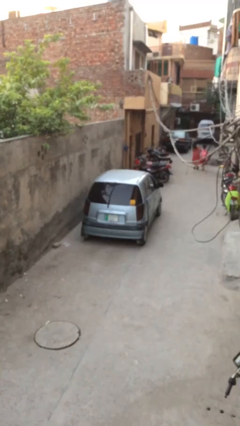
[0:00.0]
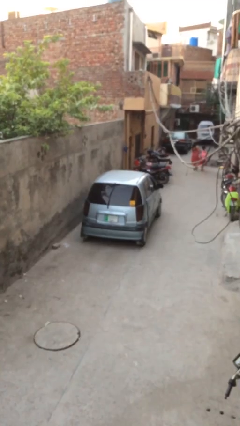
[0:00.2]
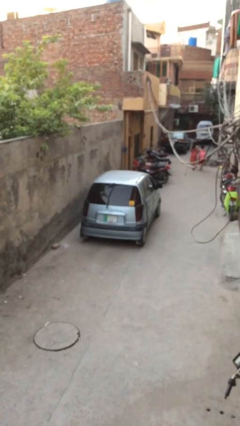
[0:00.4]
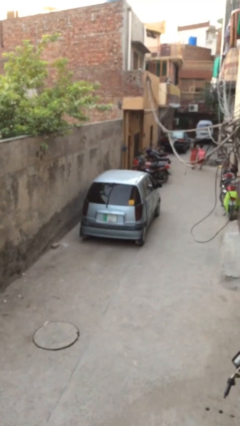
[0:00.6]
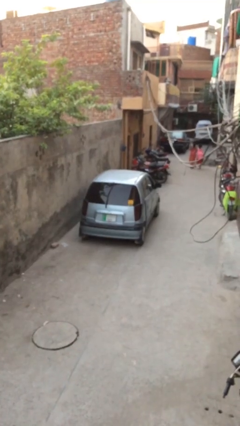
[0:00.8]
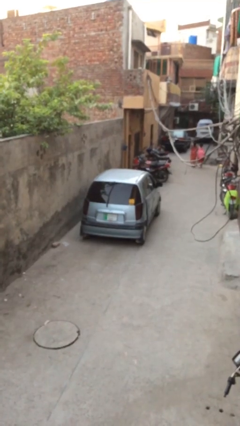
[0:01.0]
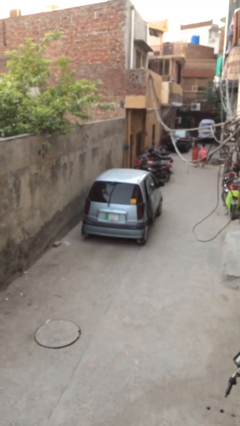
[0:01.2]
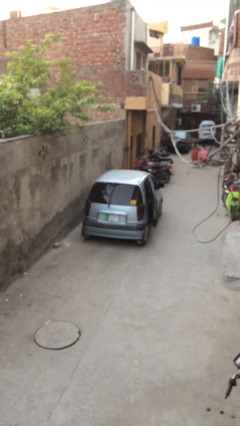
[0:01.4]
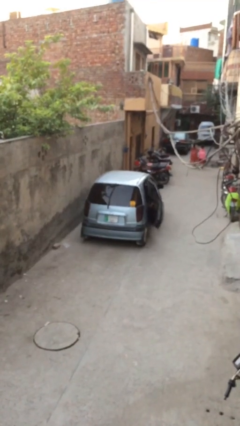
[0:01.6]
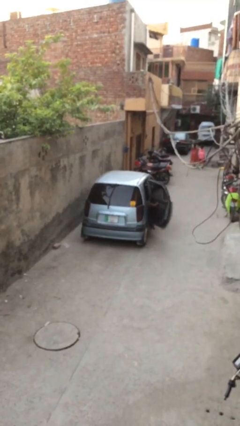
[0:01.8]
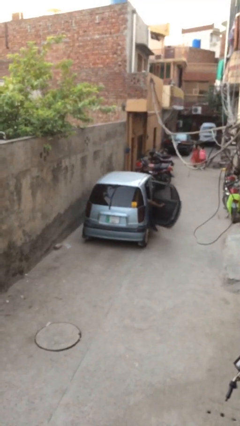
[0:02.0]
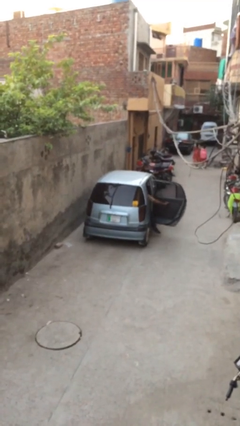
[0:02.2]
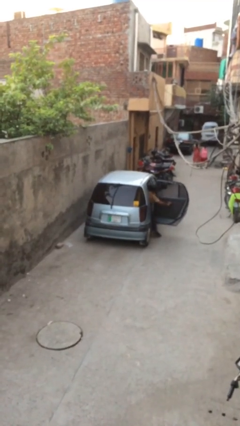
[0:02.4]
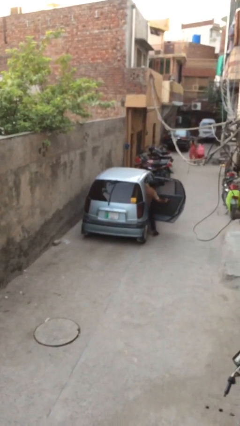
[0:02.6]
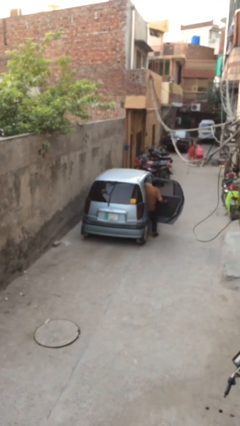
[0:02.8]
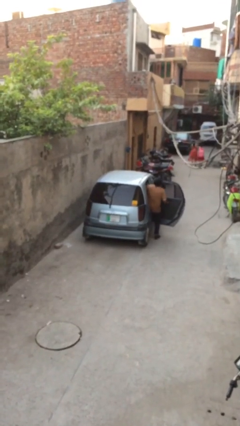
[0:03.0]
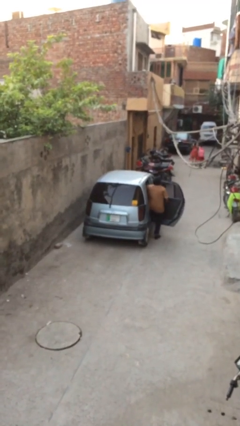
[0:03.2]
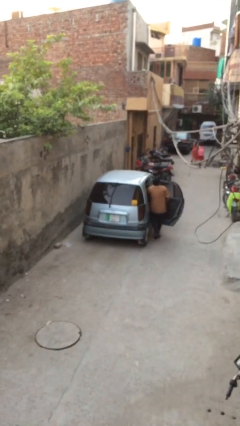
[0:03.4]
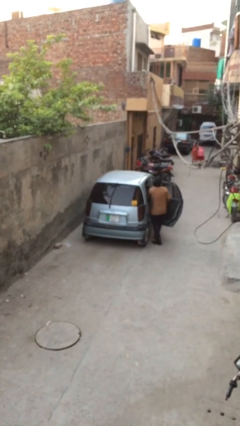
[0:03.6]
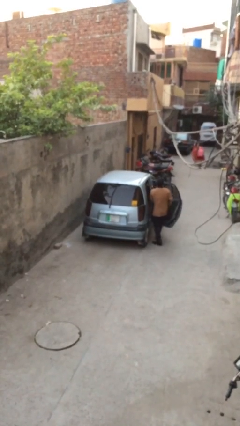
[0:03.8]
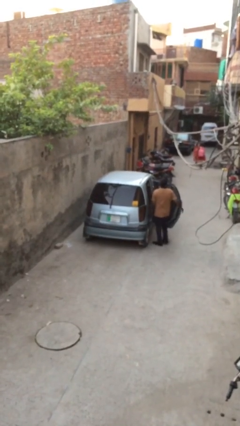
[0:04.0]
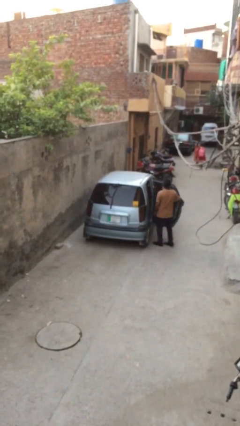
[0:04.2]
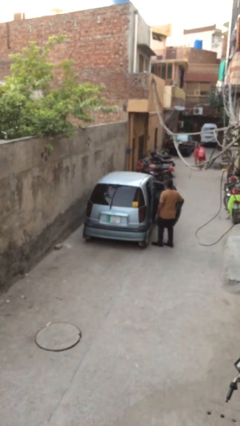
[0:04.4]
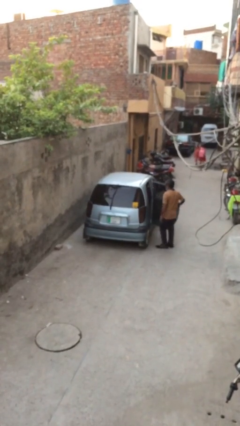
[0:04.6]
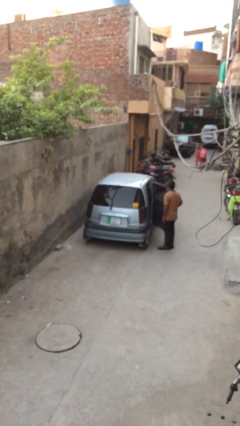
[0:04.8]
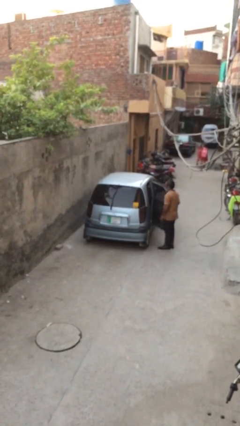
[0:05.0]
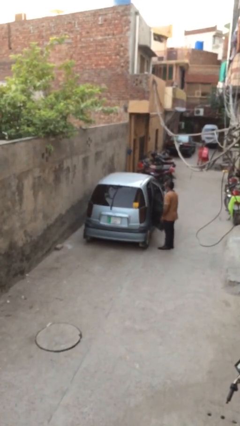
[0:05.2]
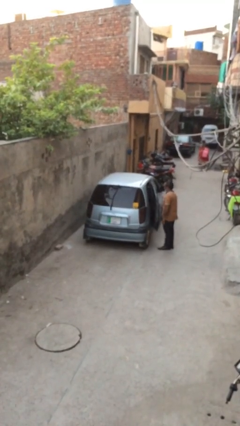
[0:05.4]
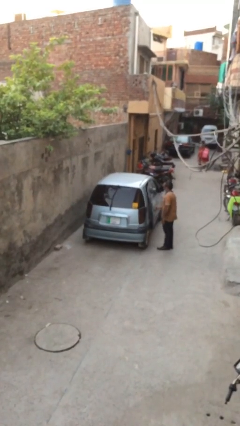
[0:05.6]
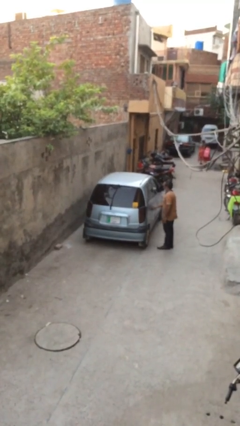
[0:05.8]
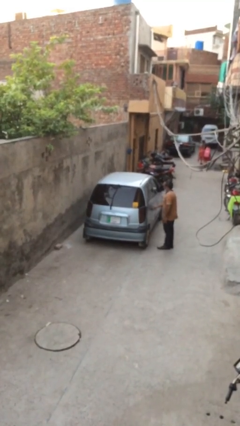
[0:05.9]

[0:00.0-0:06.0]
car drops off person

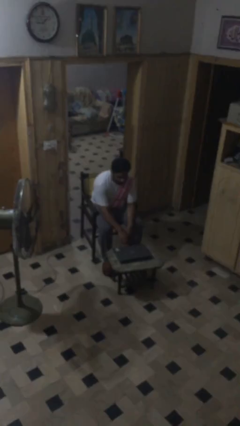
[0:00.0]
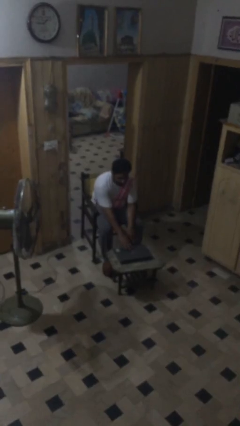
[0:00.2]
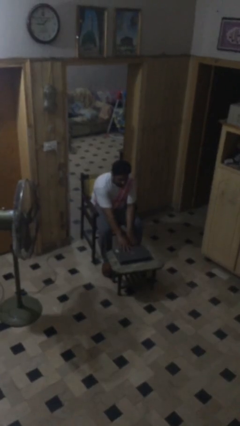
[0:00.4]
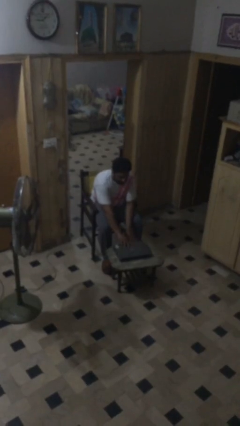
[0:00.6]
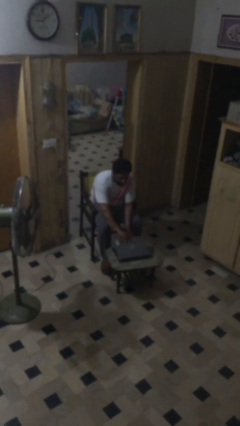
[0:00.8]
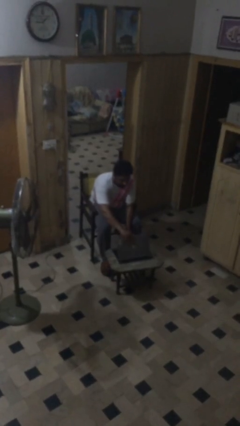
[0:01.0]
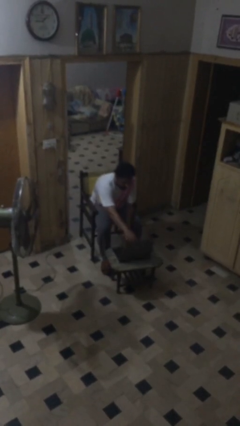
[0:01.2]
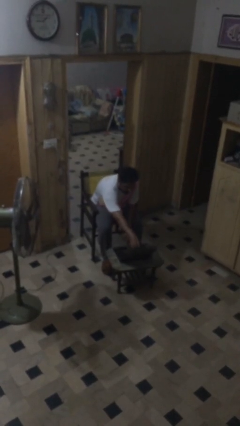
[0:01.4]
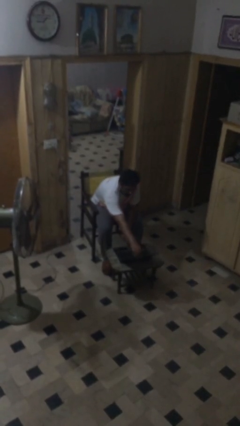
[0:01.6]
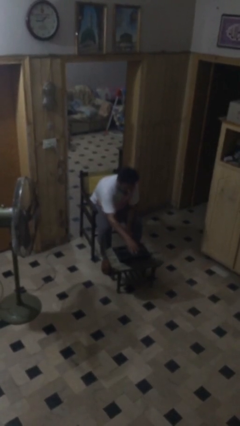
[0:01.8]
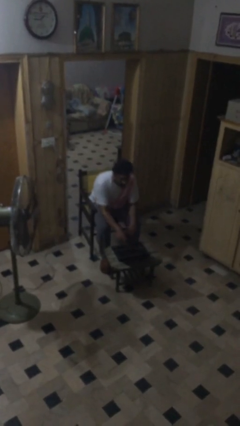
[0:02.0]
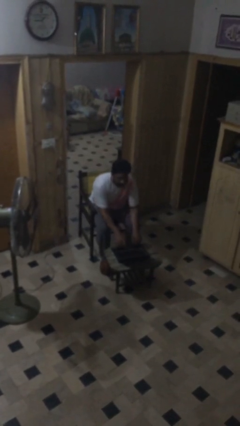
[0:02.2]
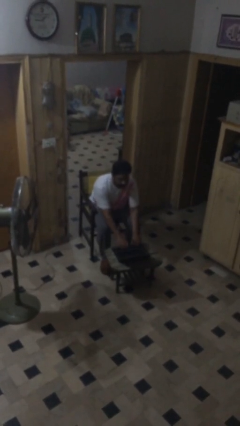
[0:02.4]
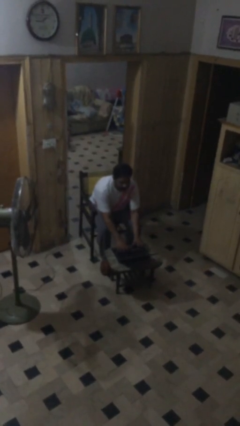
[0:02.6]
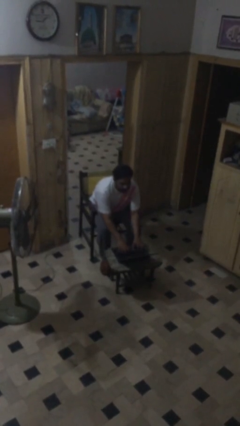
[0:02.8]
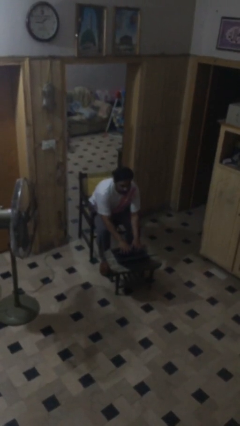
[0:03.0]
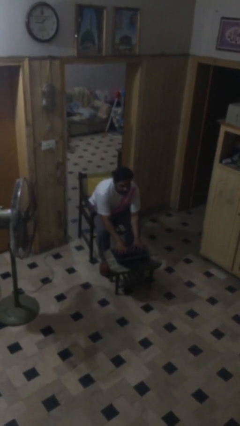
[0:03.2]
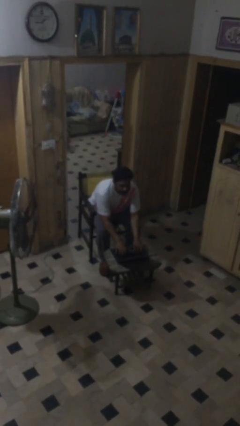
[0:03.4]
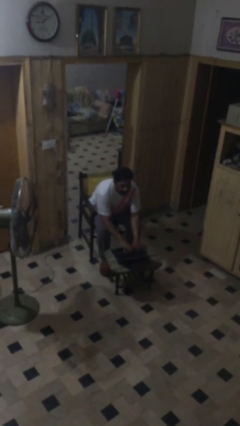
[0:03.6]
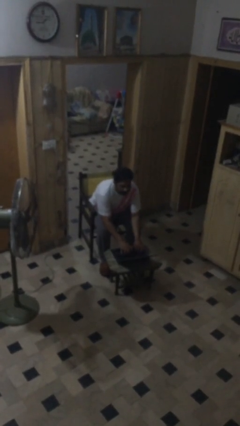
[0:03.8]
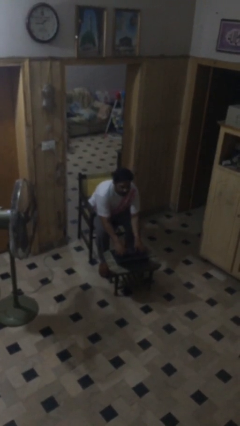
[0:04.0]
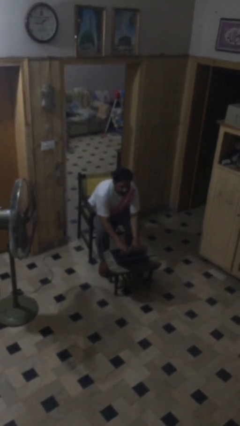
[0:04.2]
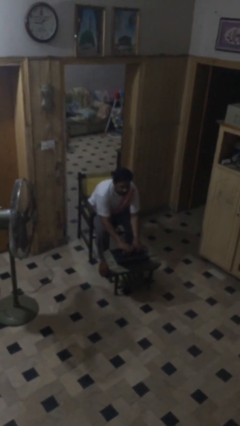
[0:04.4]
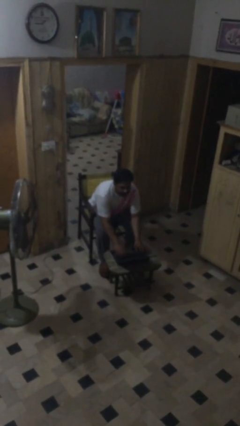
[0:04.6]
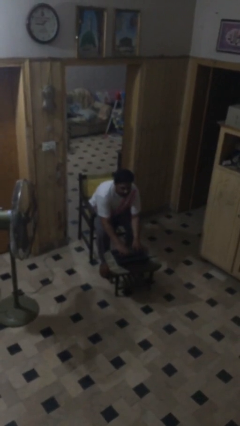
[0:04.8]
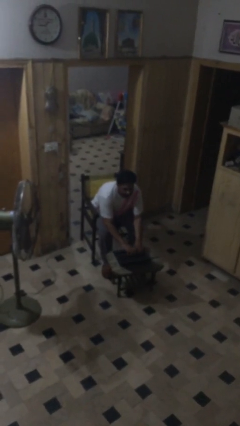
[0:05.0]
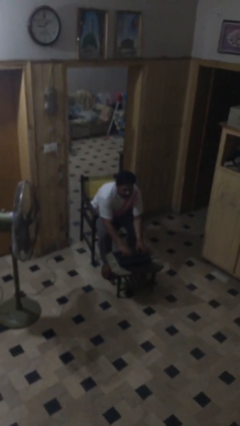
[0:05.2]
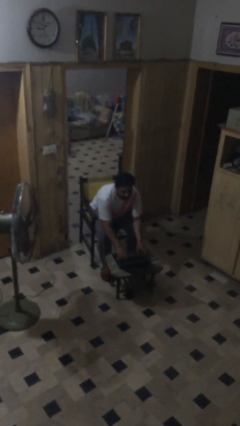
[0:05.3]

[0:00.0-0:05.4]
person interacts with laptop

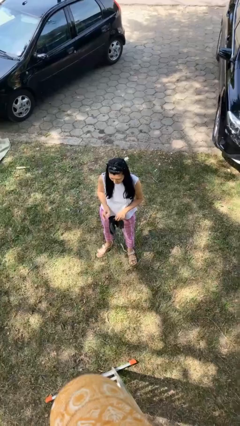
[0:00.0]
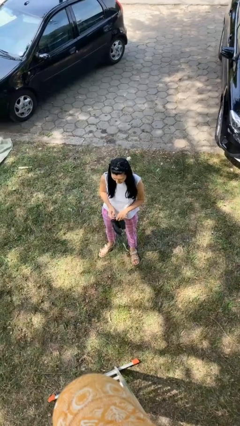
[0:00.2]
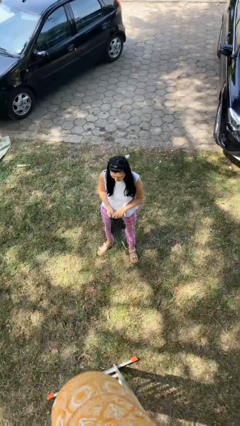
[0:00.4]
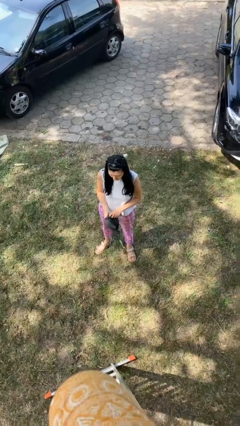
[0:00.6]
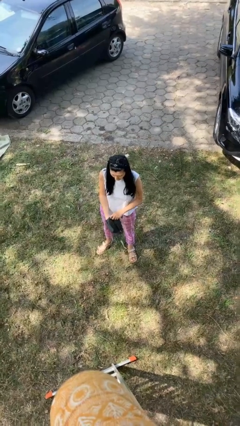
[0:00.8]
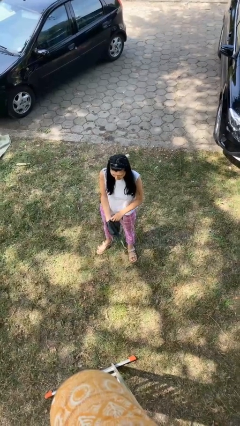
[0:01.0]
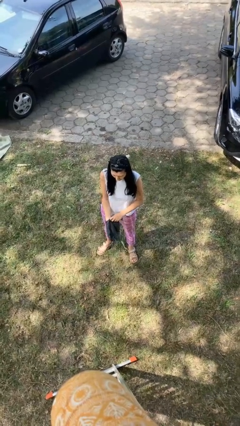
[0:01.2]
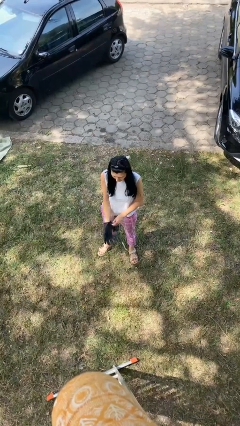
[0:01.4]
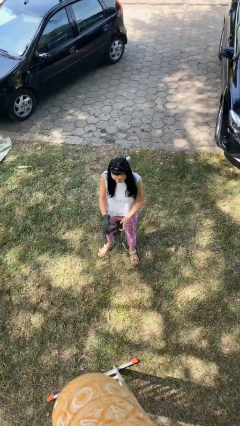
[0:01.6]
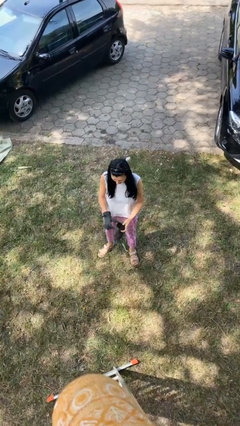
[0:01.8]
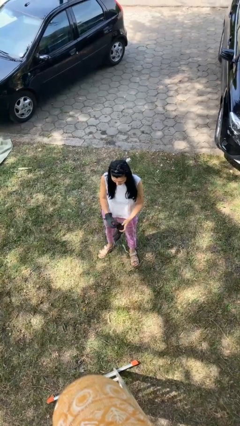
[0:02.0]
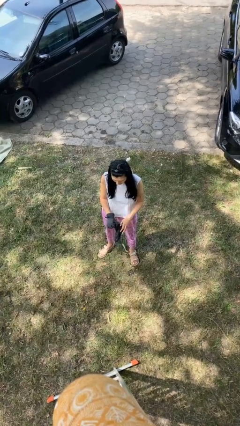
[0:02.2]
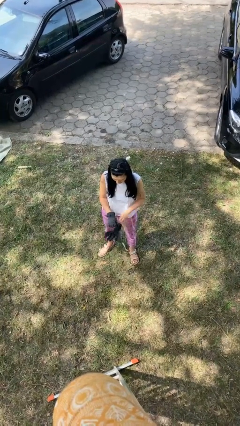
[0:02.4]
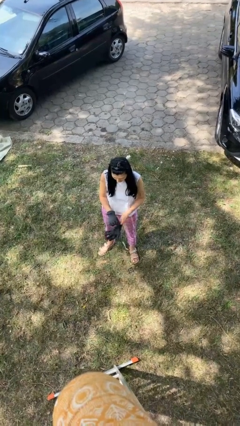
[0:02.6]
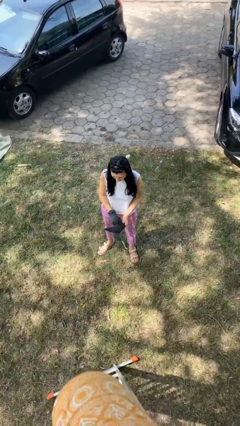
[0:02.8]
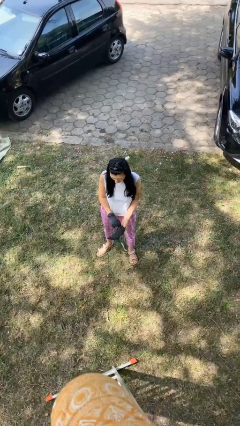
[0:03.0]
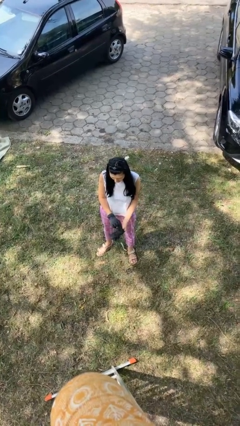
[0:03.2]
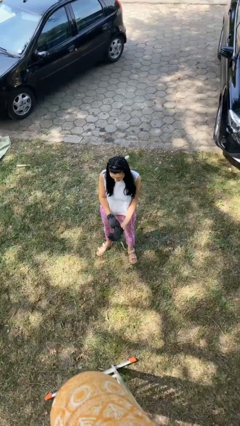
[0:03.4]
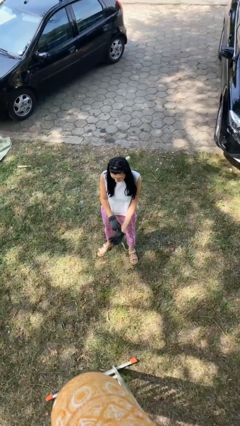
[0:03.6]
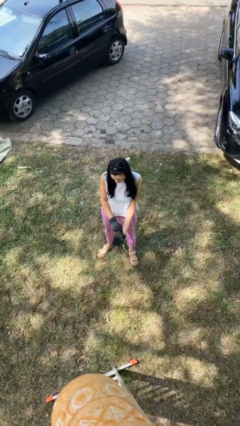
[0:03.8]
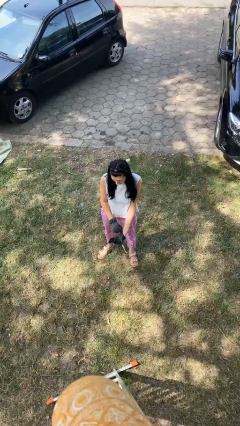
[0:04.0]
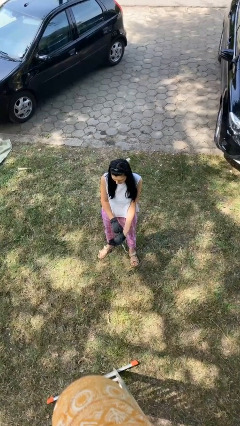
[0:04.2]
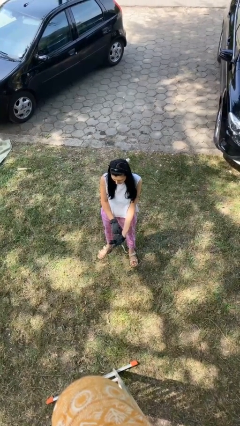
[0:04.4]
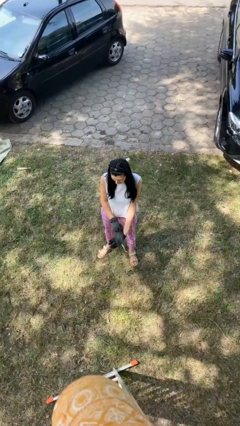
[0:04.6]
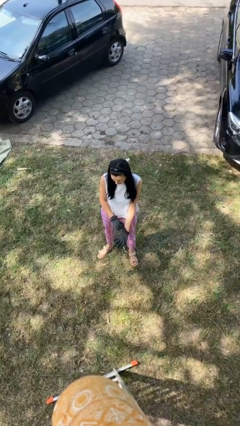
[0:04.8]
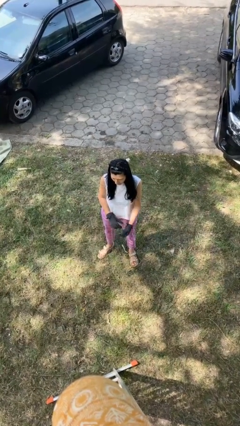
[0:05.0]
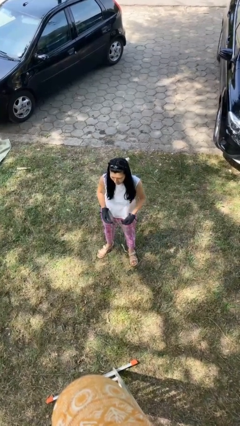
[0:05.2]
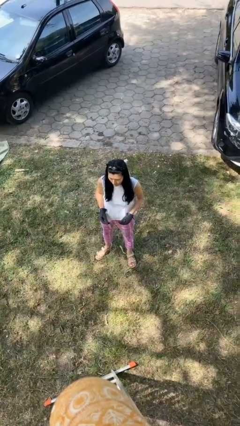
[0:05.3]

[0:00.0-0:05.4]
person puts on gloves

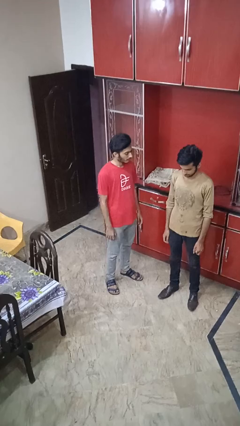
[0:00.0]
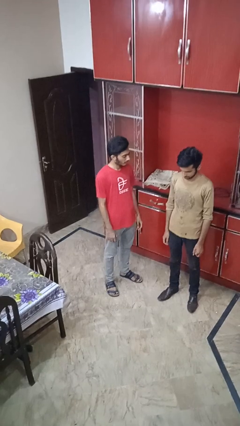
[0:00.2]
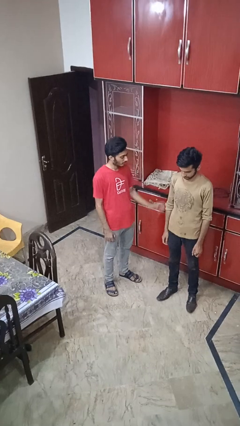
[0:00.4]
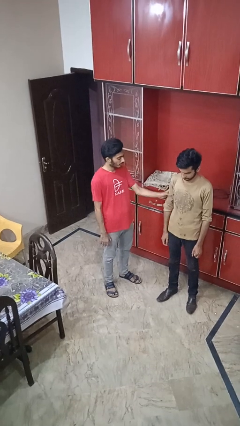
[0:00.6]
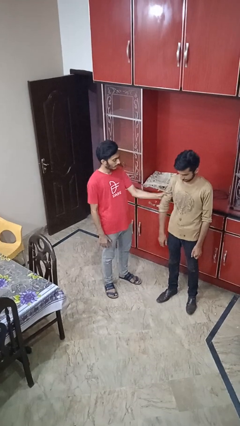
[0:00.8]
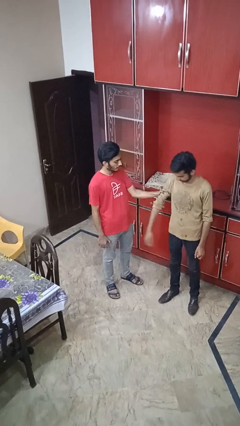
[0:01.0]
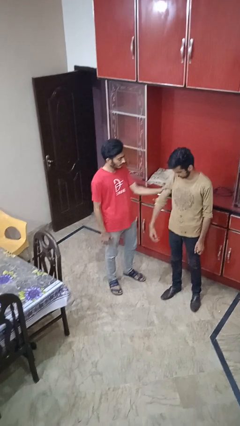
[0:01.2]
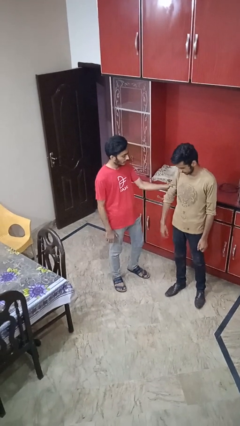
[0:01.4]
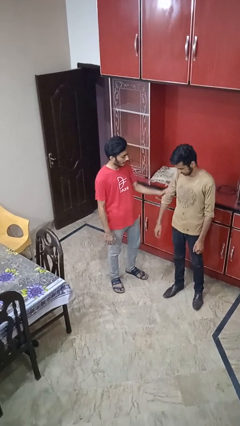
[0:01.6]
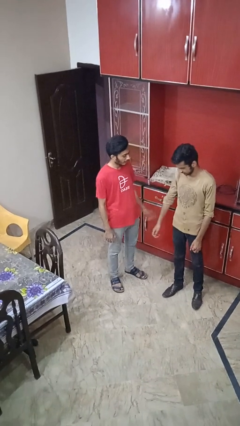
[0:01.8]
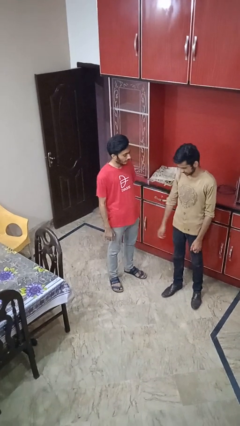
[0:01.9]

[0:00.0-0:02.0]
person grabs person by bicep
